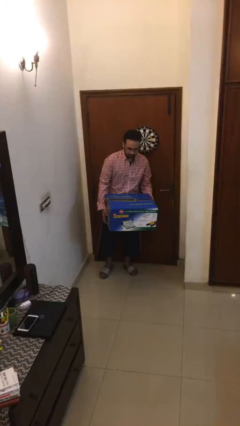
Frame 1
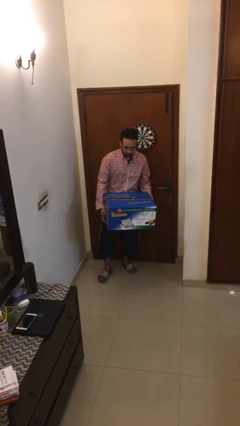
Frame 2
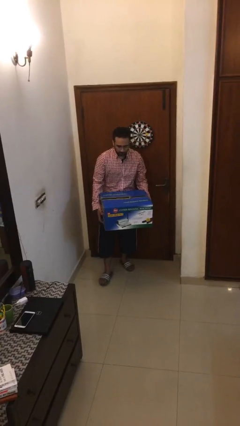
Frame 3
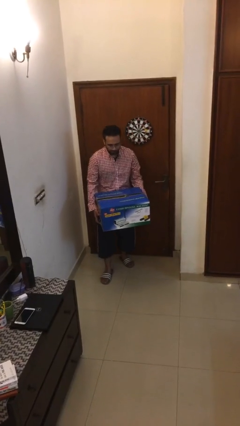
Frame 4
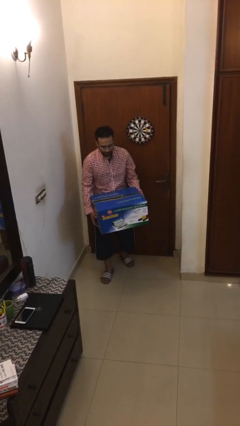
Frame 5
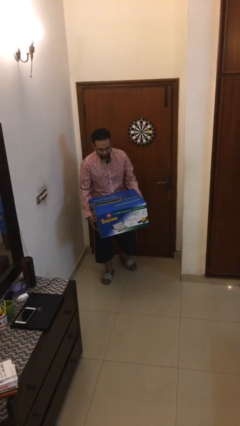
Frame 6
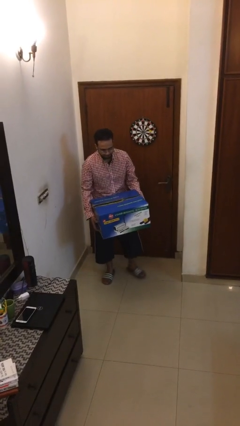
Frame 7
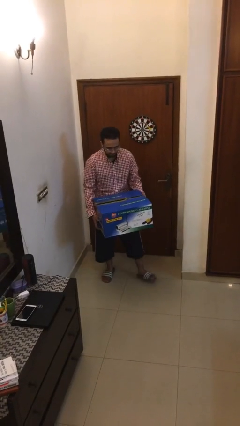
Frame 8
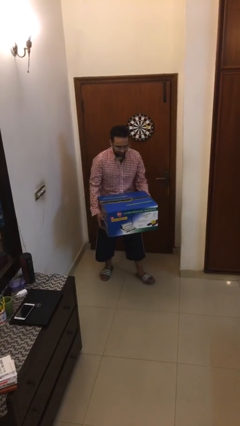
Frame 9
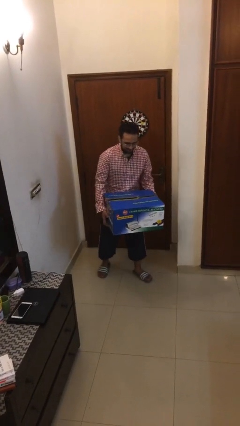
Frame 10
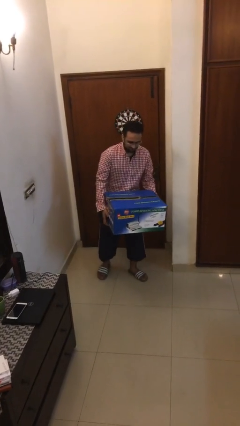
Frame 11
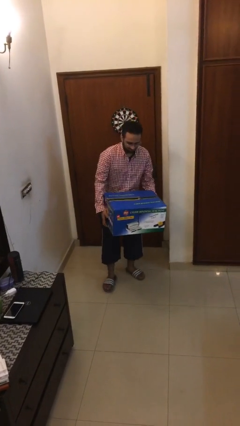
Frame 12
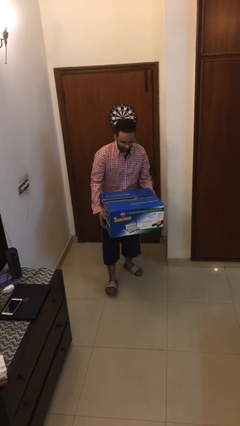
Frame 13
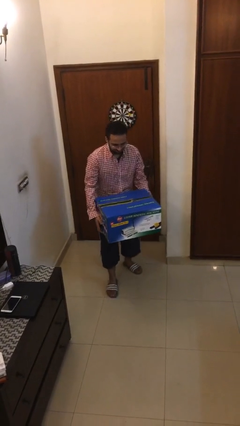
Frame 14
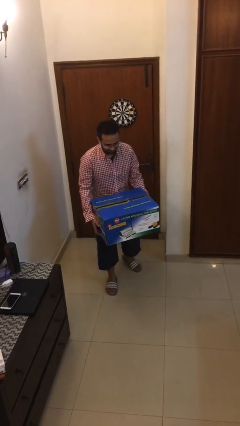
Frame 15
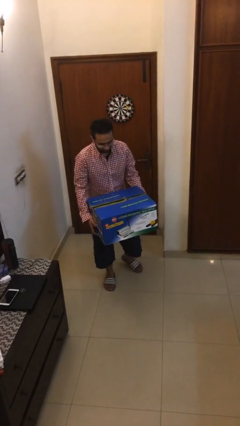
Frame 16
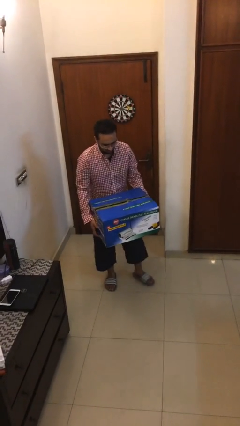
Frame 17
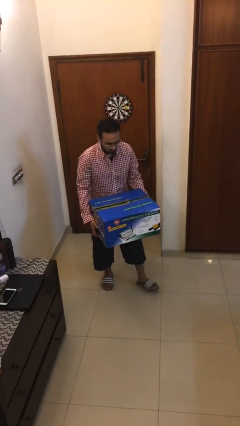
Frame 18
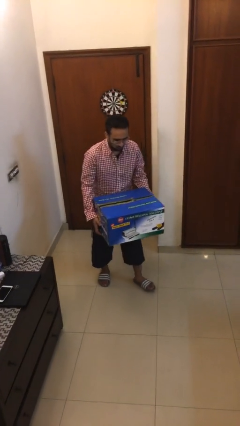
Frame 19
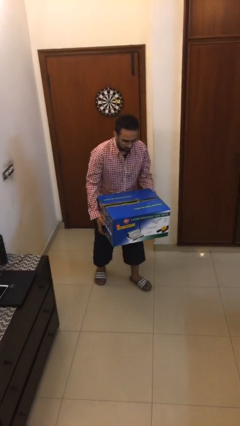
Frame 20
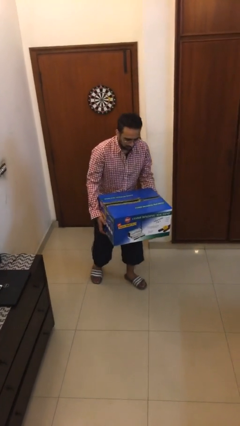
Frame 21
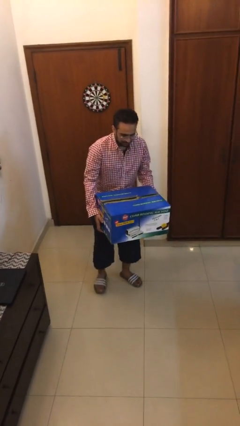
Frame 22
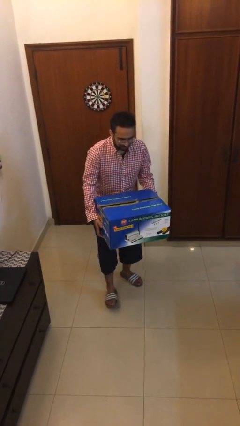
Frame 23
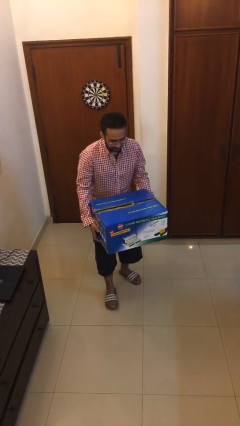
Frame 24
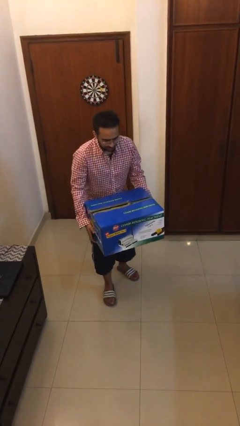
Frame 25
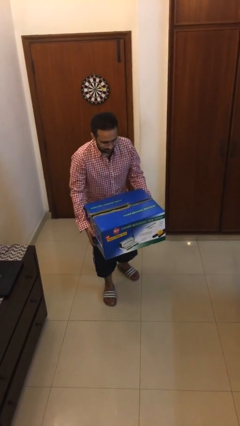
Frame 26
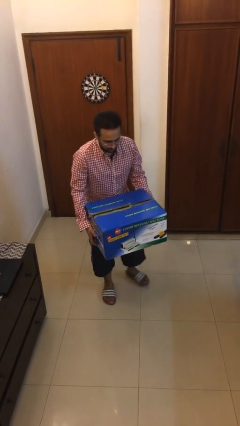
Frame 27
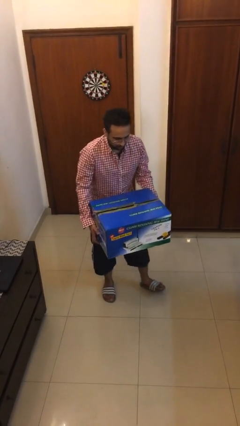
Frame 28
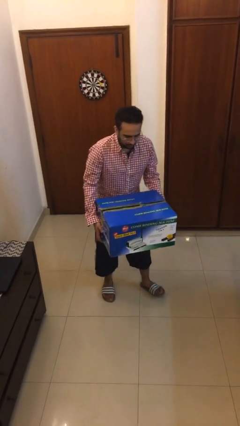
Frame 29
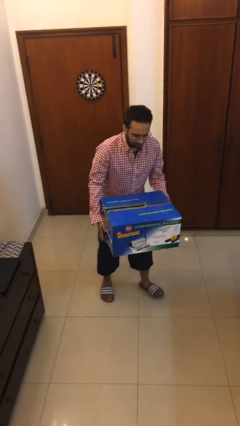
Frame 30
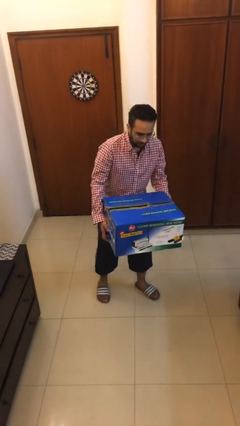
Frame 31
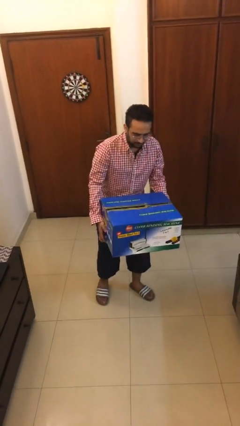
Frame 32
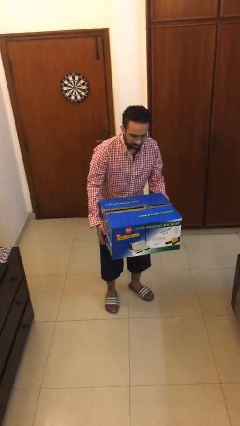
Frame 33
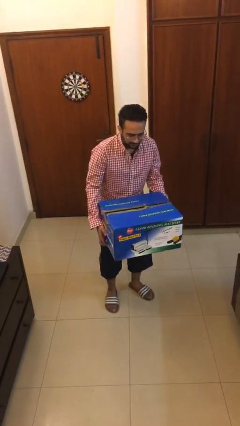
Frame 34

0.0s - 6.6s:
person carries heavy object

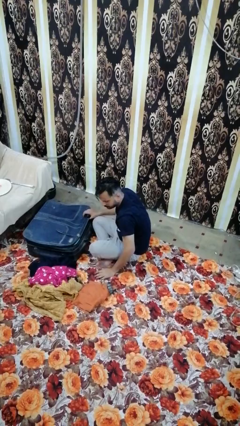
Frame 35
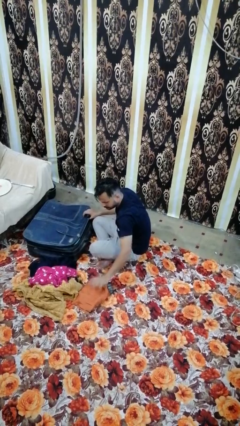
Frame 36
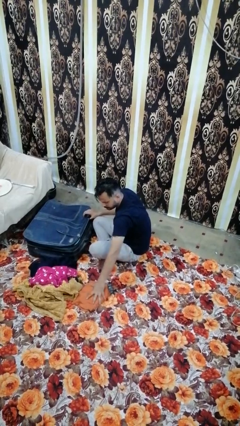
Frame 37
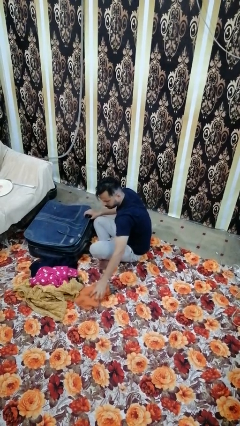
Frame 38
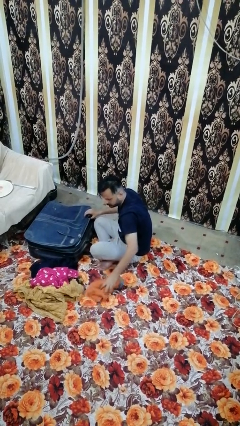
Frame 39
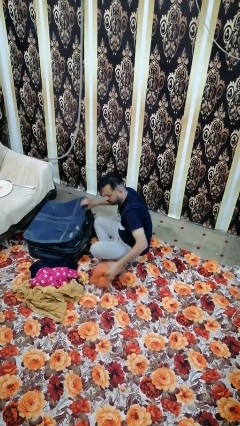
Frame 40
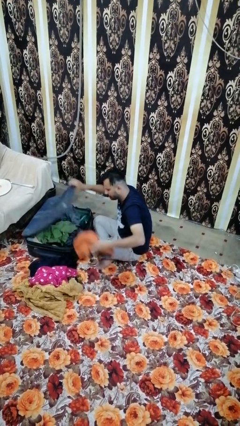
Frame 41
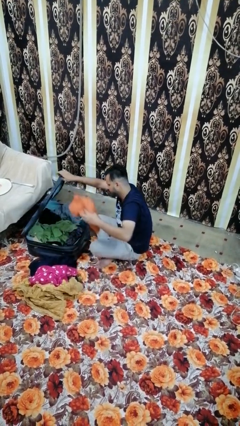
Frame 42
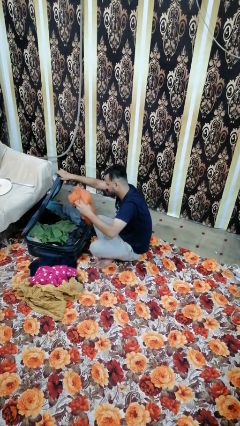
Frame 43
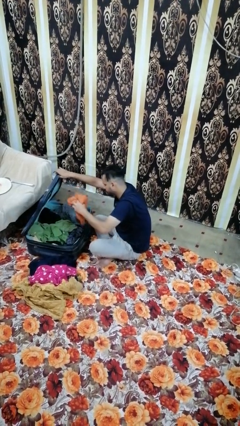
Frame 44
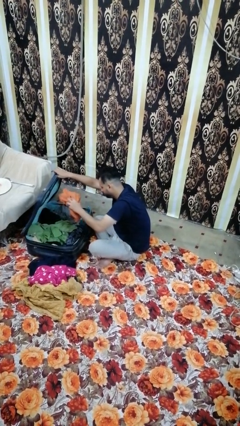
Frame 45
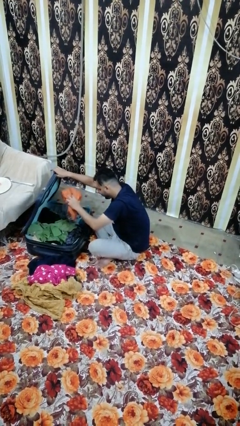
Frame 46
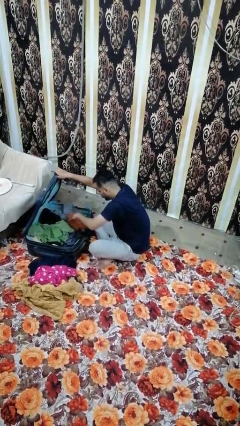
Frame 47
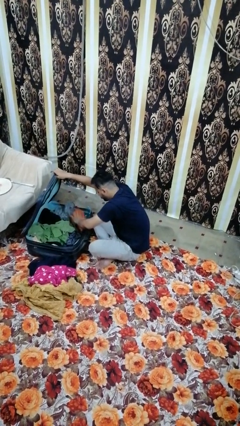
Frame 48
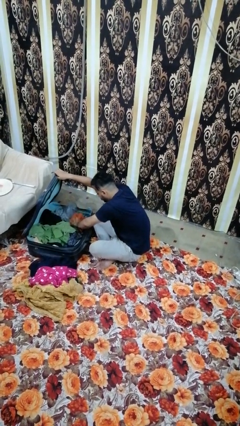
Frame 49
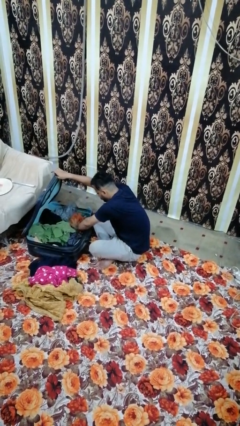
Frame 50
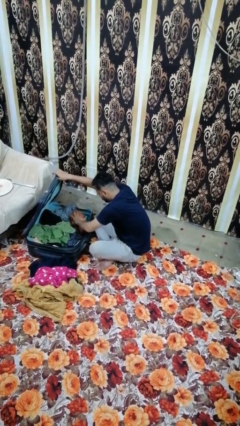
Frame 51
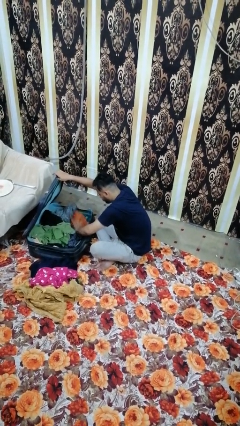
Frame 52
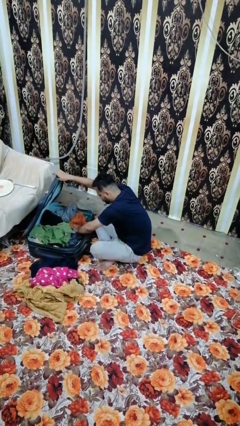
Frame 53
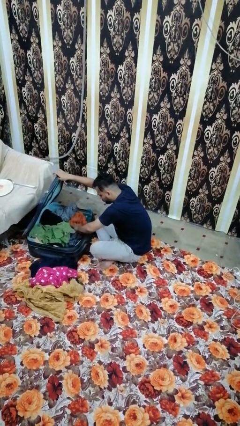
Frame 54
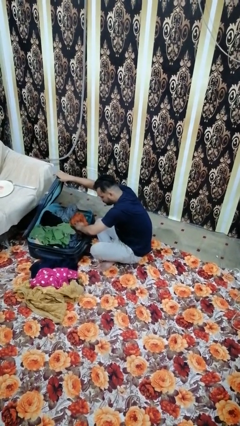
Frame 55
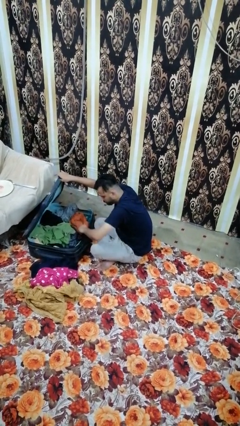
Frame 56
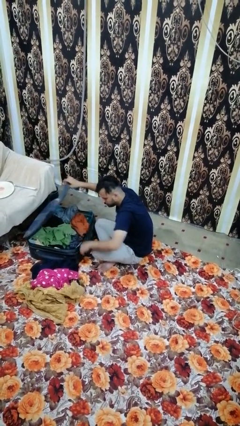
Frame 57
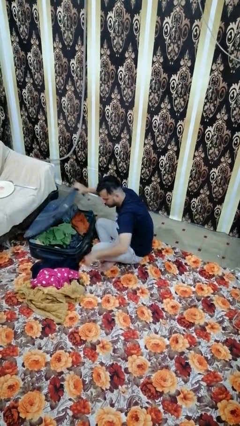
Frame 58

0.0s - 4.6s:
person loads clothes into suitcase

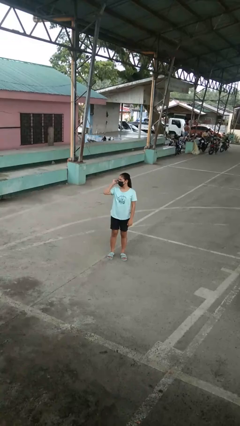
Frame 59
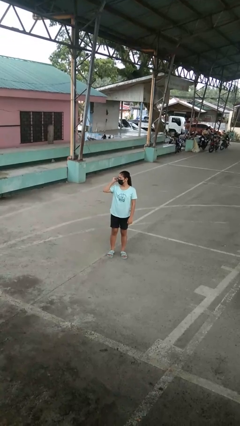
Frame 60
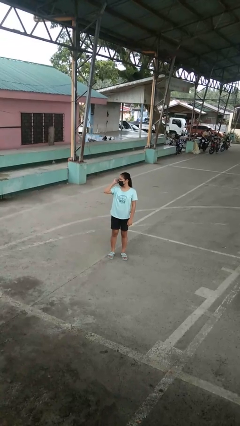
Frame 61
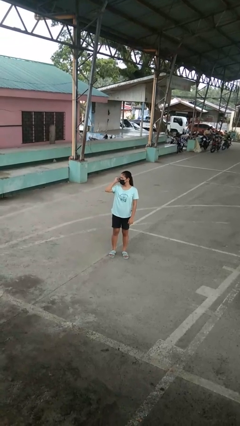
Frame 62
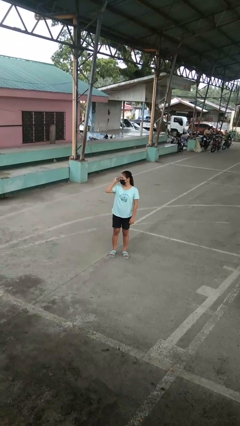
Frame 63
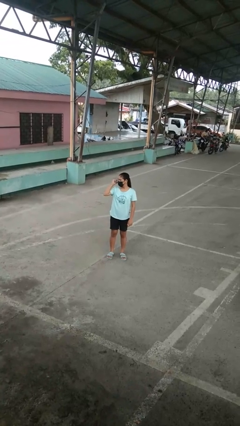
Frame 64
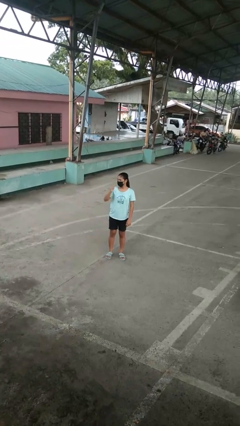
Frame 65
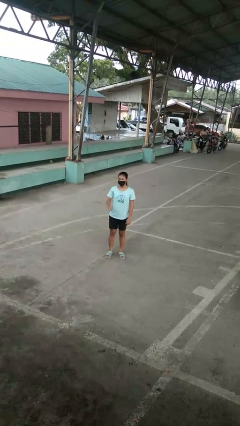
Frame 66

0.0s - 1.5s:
person gestures behind me

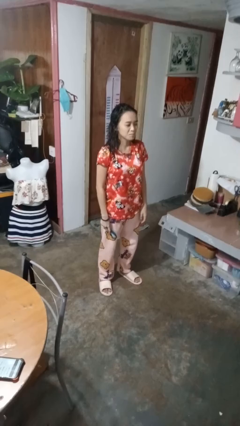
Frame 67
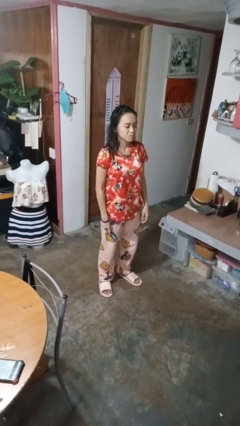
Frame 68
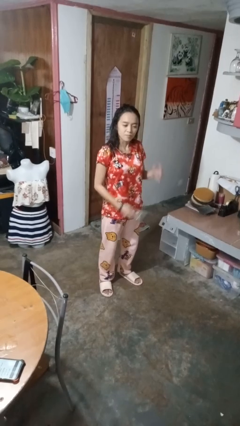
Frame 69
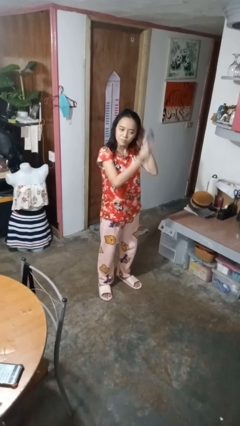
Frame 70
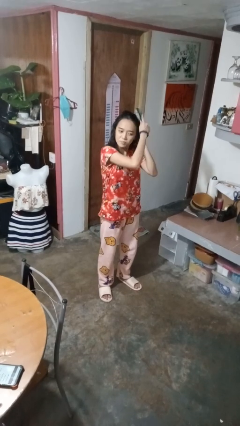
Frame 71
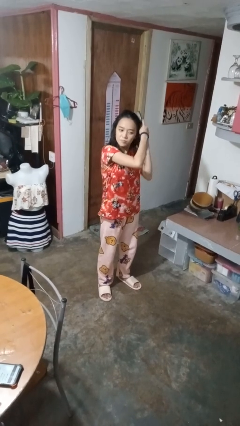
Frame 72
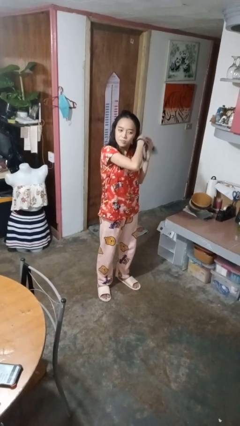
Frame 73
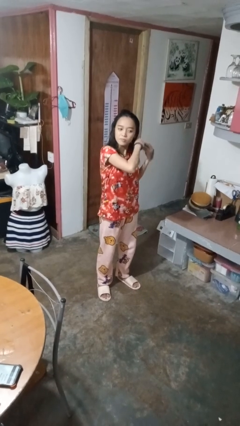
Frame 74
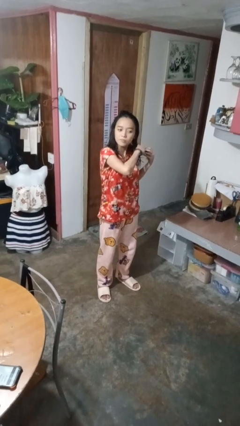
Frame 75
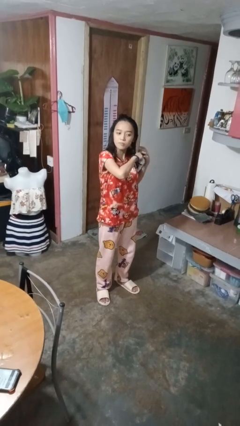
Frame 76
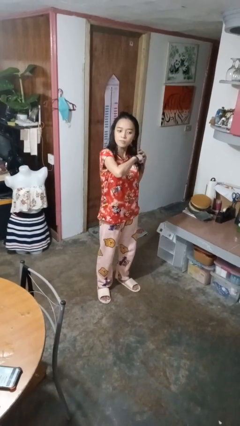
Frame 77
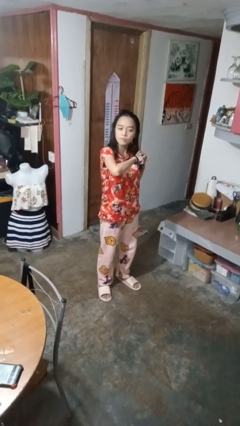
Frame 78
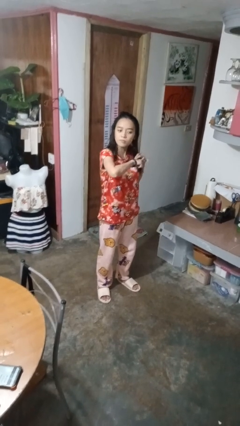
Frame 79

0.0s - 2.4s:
person brushes hair

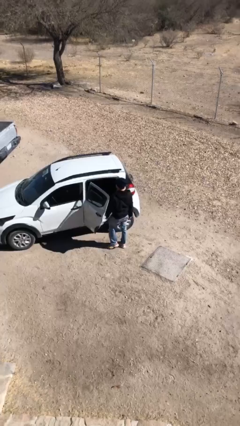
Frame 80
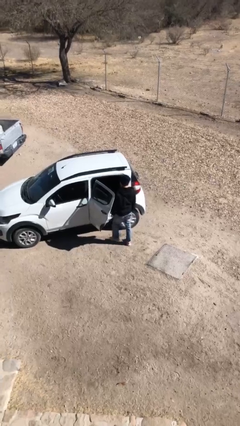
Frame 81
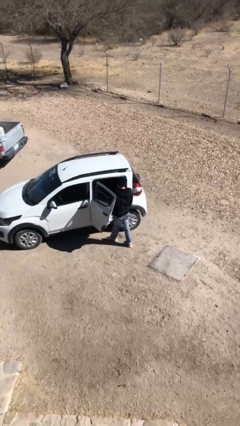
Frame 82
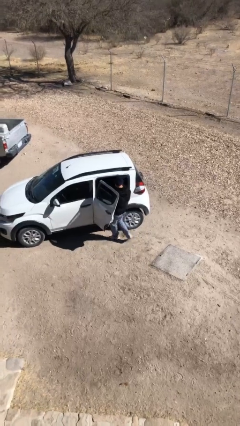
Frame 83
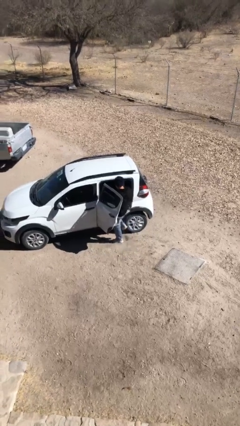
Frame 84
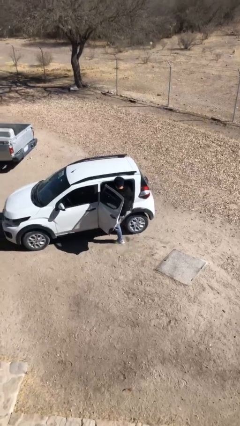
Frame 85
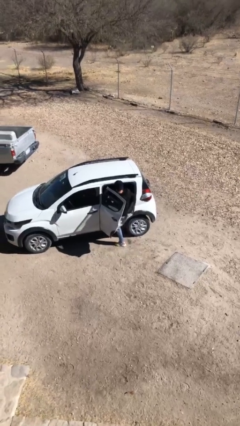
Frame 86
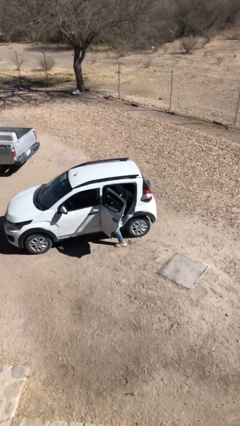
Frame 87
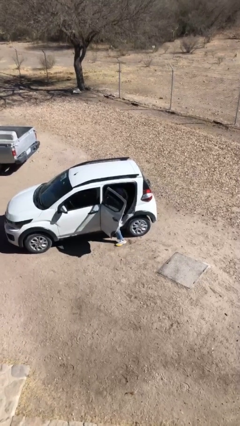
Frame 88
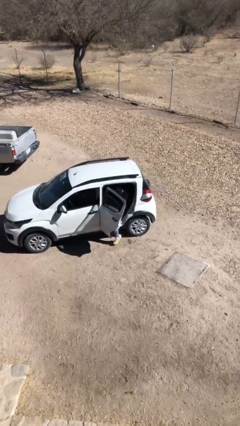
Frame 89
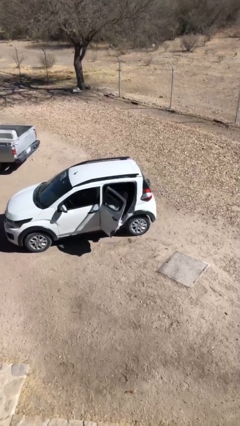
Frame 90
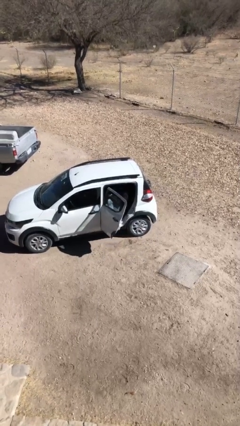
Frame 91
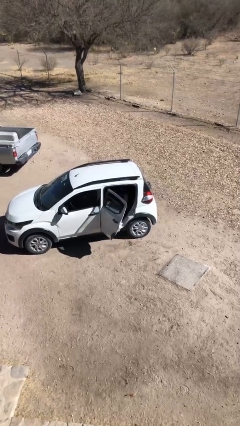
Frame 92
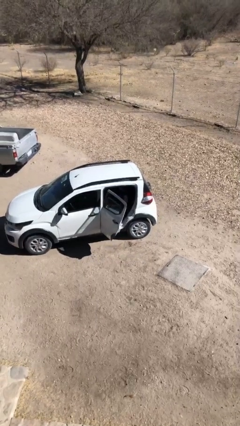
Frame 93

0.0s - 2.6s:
person enters car
